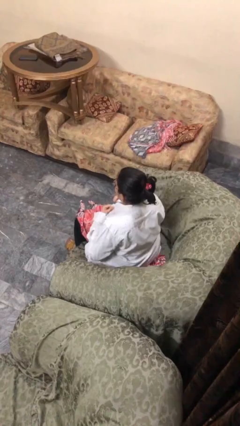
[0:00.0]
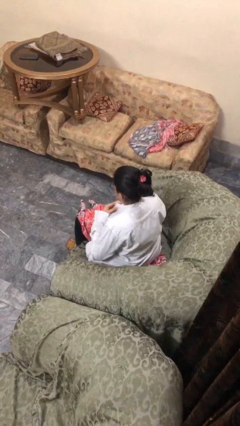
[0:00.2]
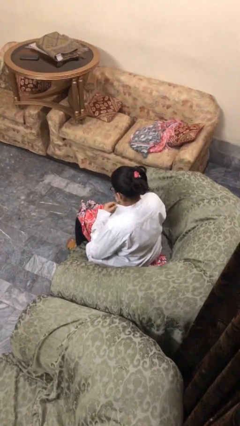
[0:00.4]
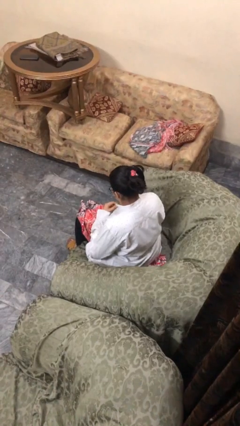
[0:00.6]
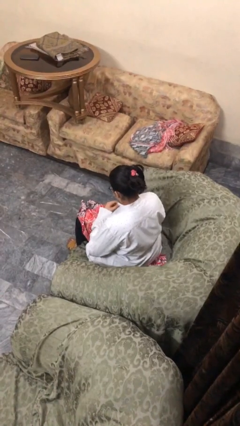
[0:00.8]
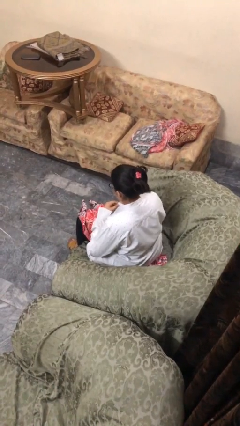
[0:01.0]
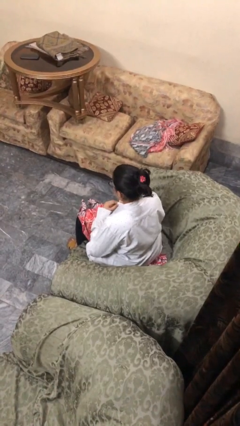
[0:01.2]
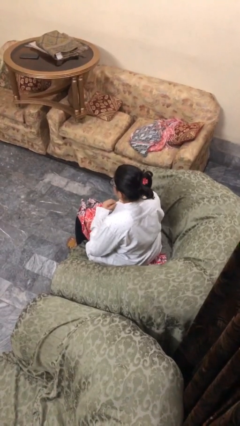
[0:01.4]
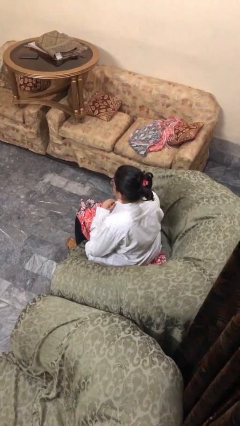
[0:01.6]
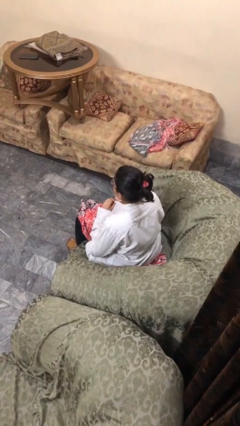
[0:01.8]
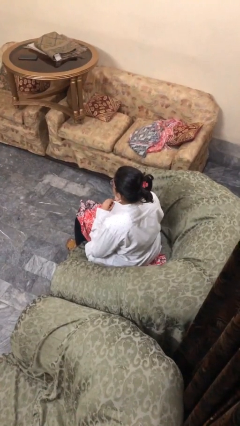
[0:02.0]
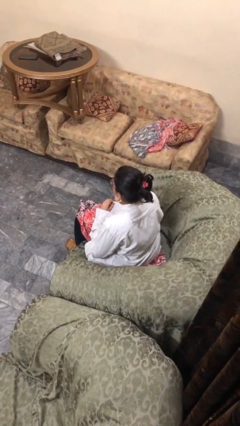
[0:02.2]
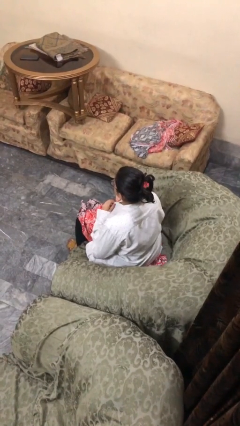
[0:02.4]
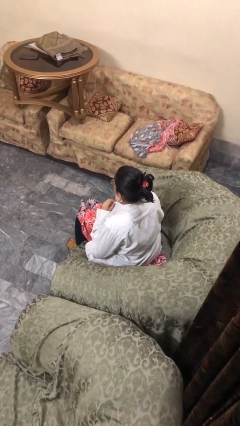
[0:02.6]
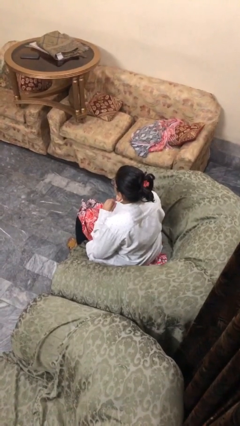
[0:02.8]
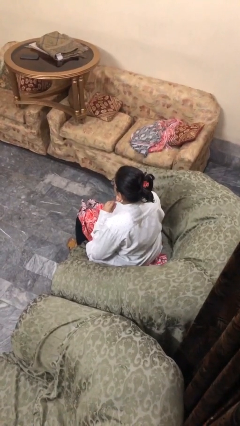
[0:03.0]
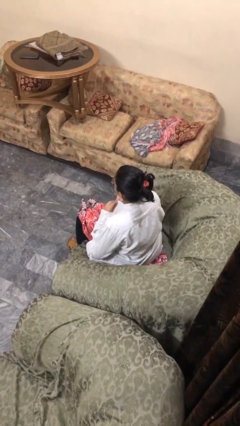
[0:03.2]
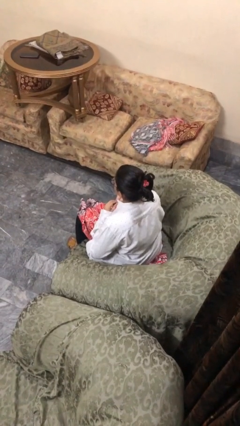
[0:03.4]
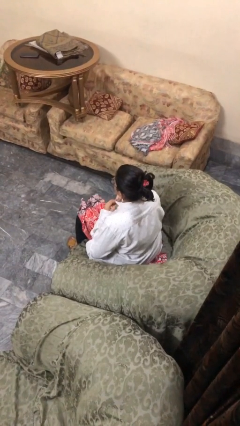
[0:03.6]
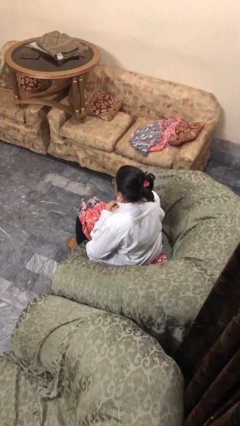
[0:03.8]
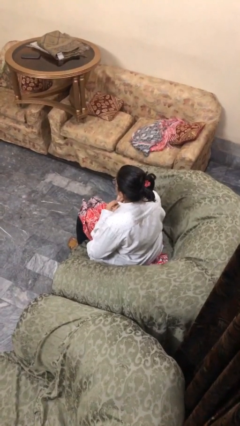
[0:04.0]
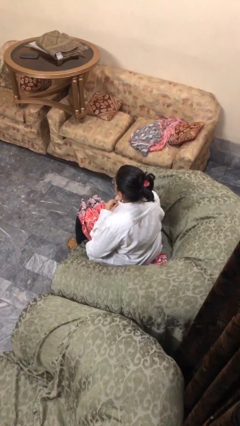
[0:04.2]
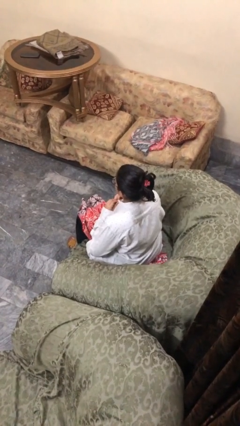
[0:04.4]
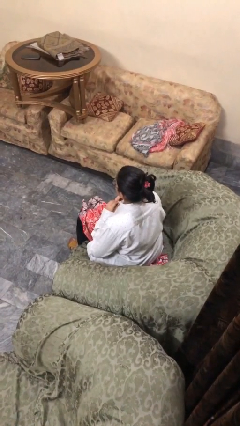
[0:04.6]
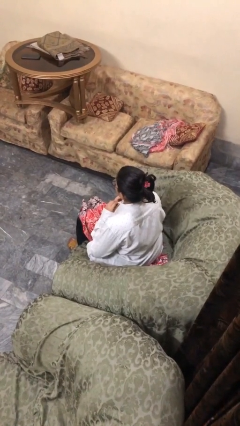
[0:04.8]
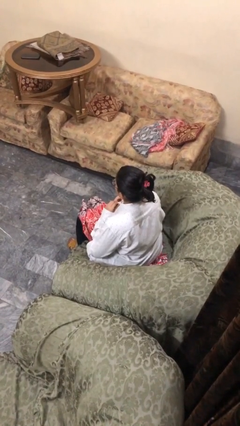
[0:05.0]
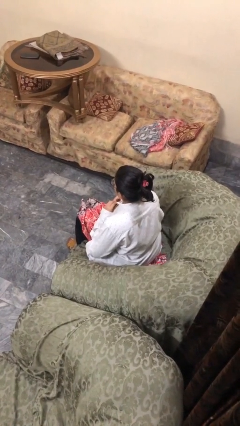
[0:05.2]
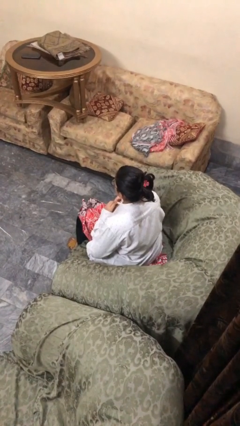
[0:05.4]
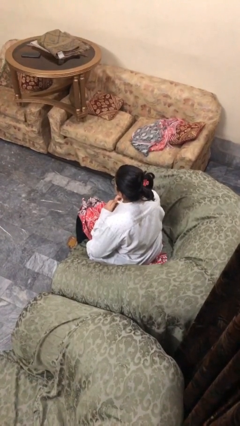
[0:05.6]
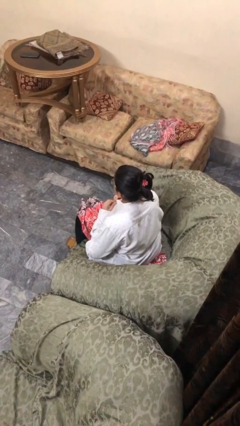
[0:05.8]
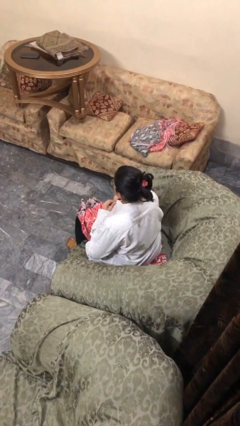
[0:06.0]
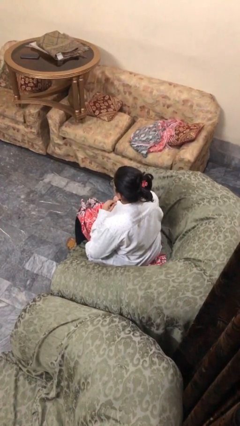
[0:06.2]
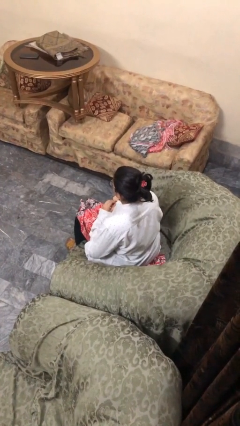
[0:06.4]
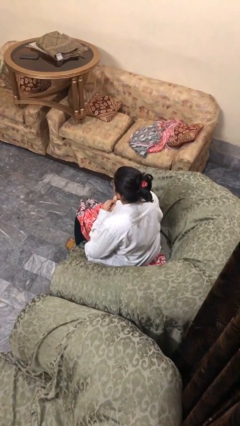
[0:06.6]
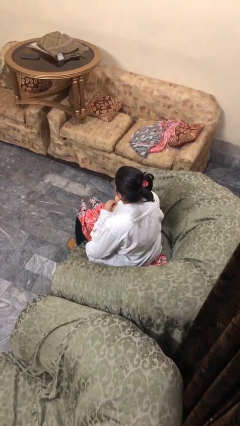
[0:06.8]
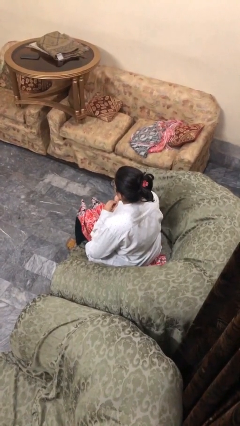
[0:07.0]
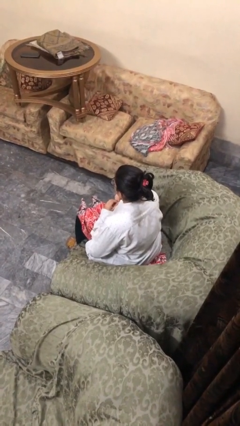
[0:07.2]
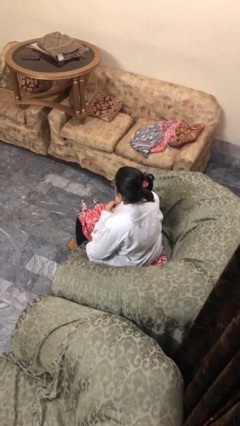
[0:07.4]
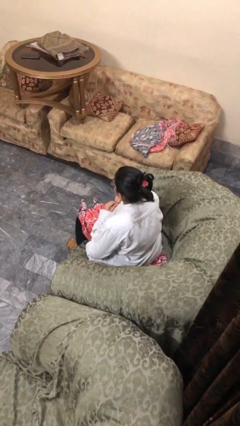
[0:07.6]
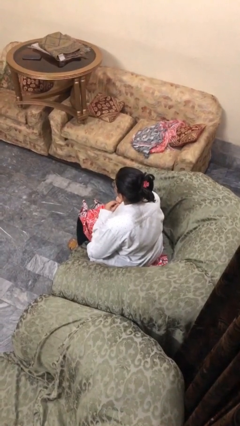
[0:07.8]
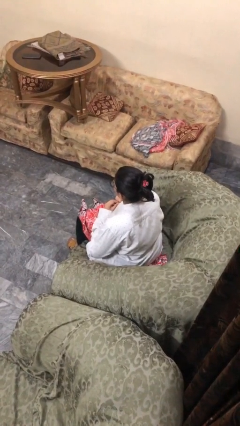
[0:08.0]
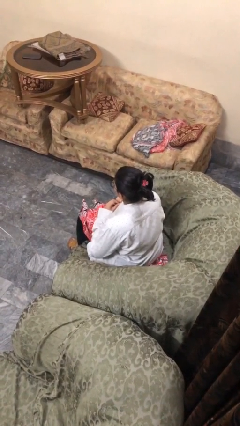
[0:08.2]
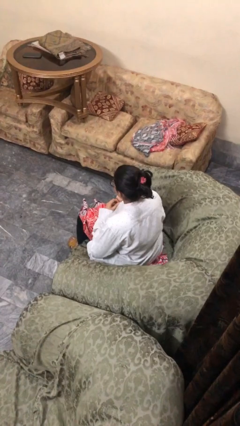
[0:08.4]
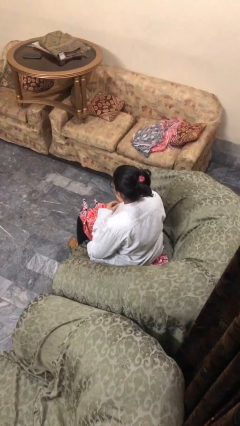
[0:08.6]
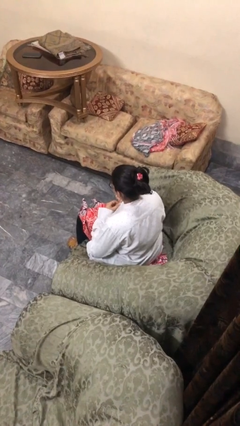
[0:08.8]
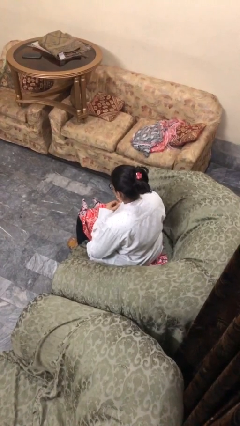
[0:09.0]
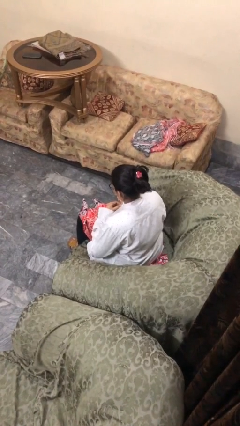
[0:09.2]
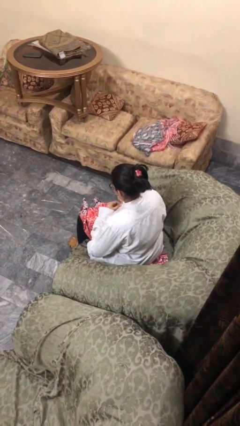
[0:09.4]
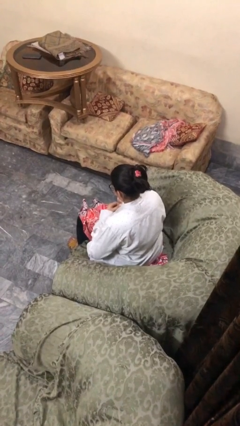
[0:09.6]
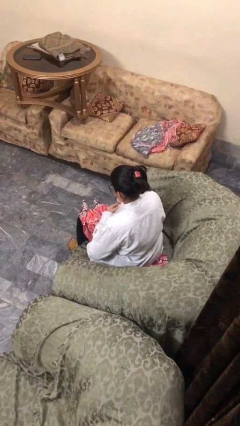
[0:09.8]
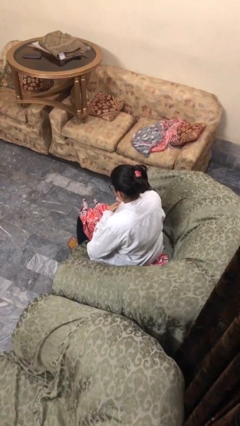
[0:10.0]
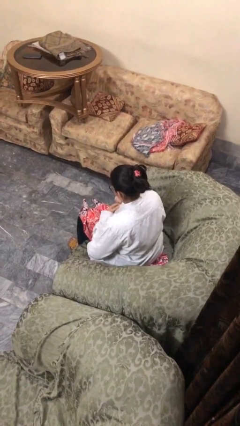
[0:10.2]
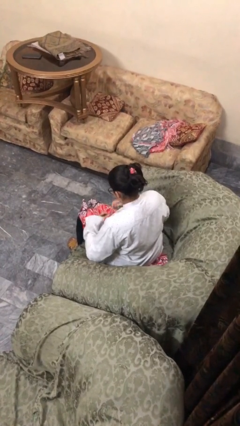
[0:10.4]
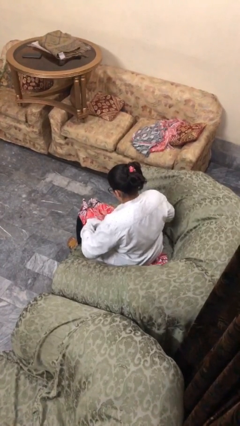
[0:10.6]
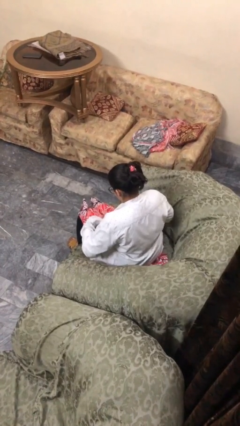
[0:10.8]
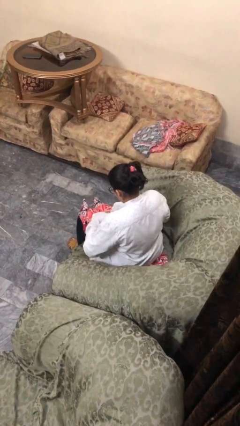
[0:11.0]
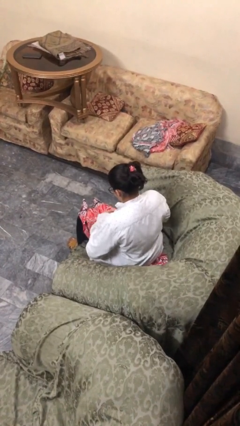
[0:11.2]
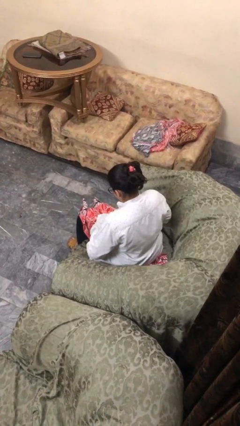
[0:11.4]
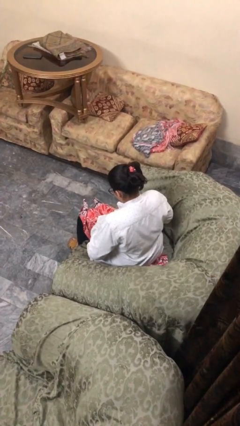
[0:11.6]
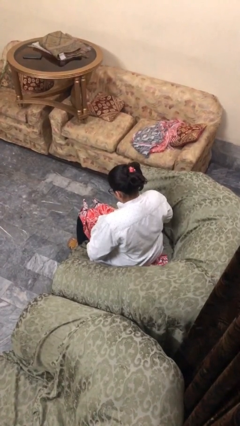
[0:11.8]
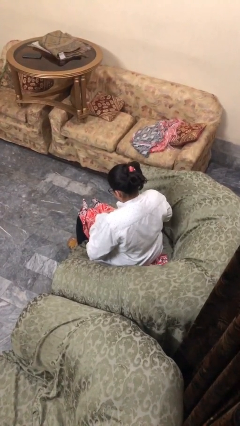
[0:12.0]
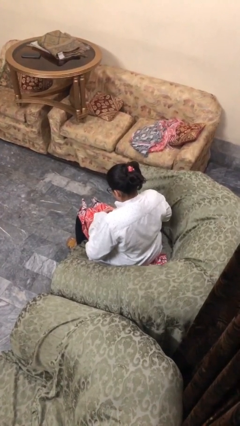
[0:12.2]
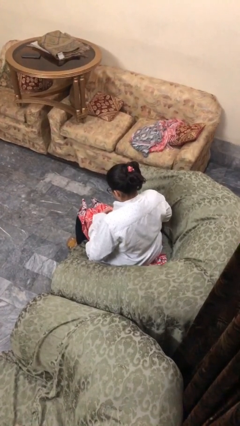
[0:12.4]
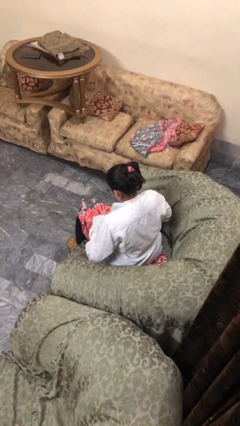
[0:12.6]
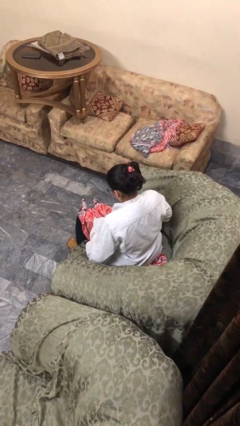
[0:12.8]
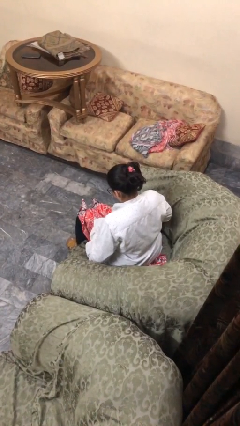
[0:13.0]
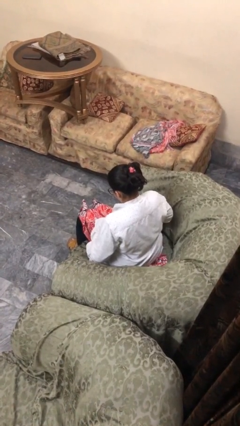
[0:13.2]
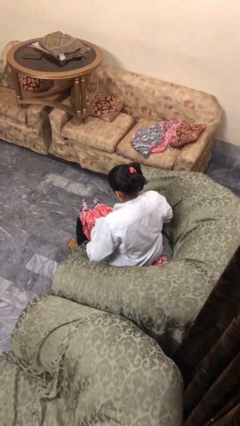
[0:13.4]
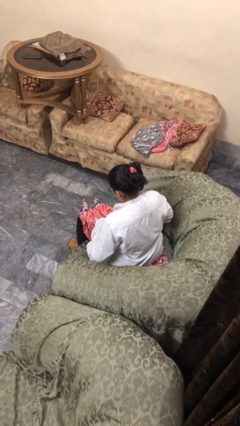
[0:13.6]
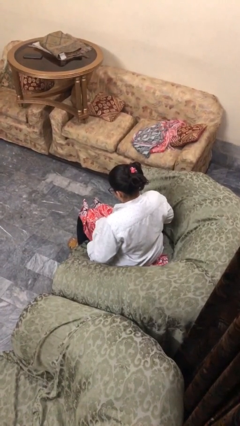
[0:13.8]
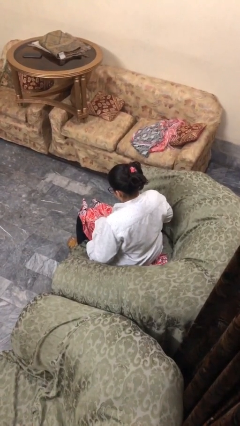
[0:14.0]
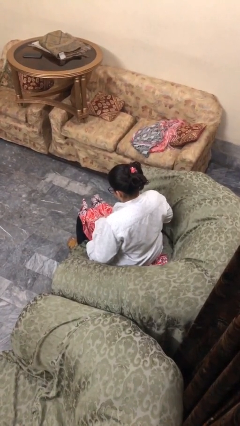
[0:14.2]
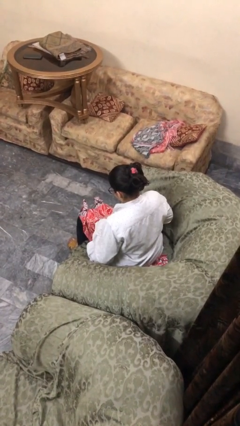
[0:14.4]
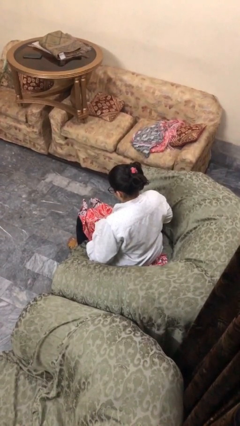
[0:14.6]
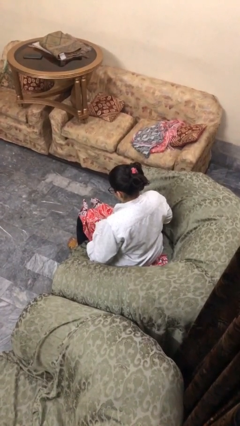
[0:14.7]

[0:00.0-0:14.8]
person buttons shirt

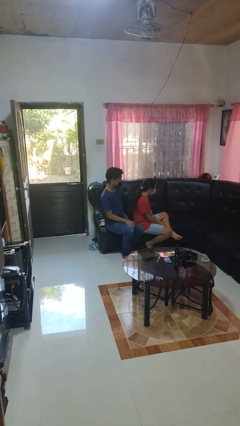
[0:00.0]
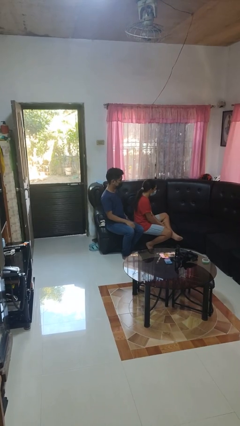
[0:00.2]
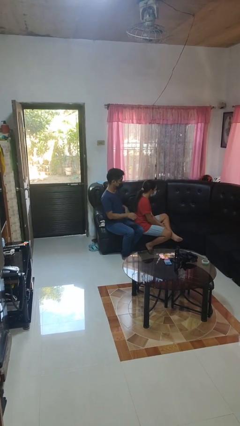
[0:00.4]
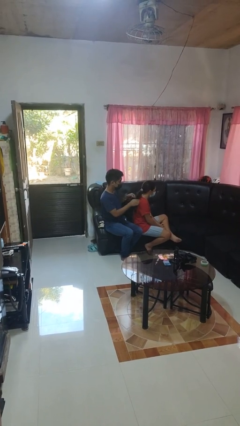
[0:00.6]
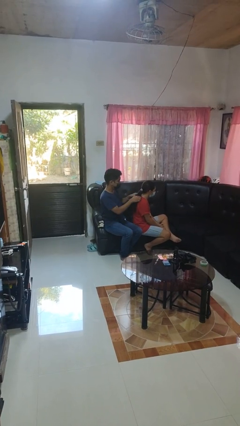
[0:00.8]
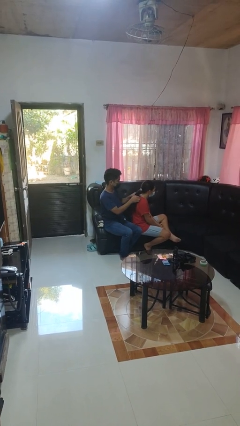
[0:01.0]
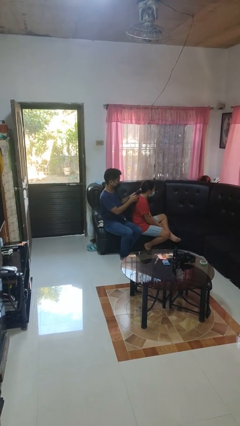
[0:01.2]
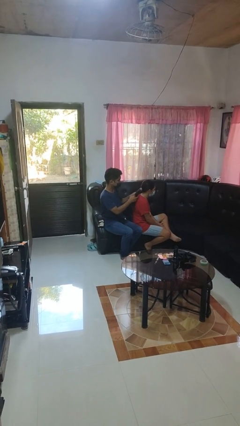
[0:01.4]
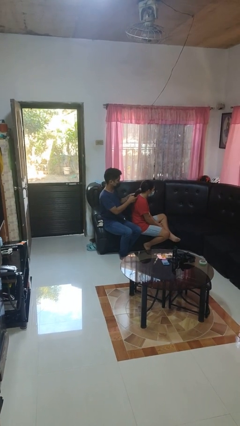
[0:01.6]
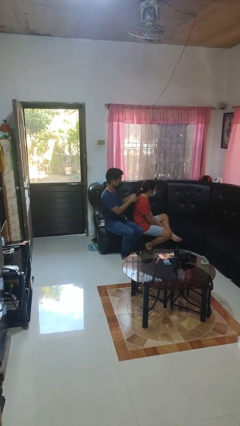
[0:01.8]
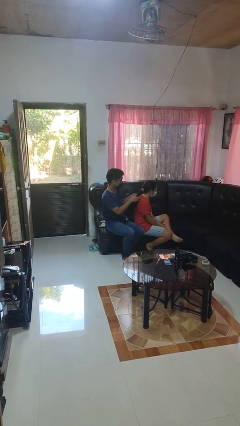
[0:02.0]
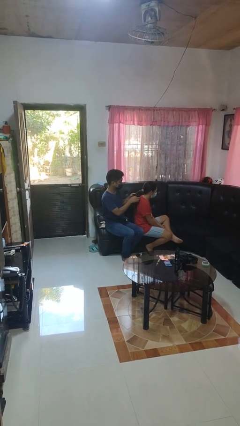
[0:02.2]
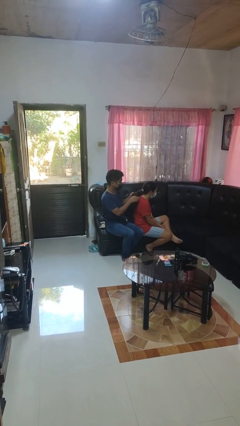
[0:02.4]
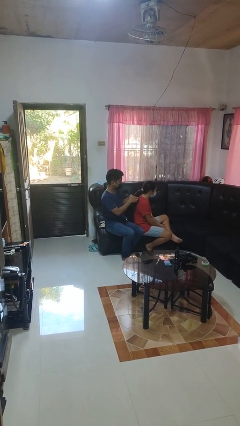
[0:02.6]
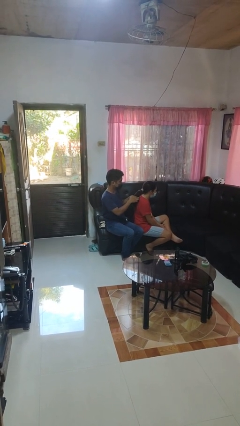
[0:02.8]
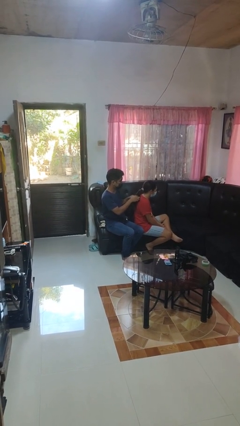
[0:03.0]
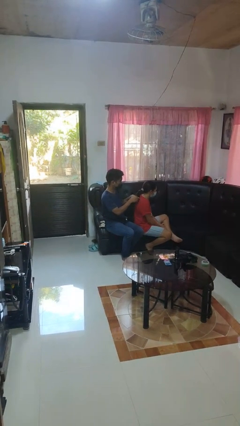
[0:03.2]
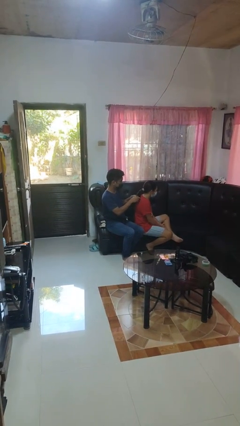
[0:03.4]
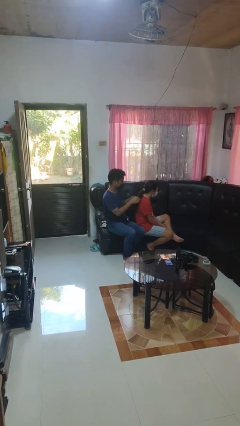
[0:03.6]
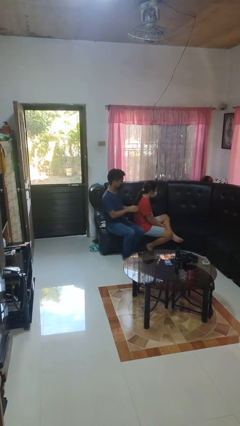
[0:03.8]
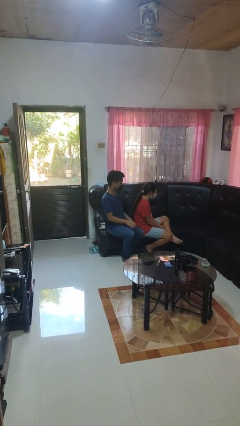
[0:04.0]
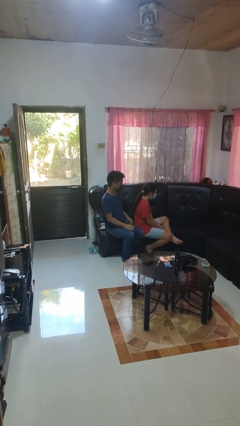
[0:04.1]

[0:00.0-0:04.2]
person braids hair of person
